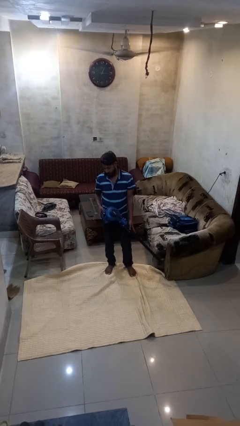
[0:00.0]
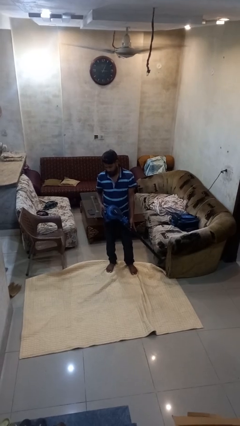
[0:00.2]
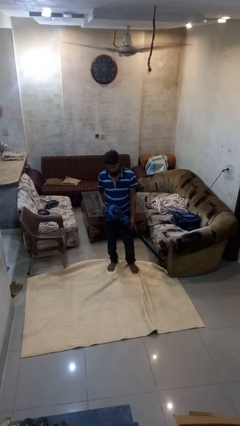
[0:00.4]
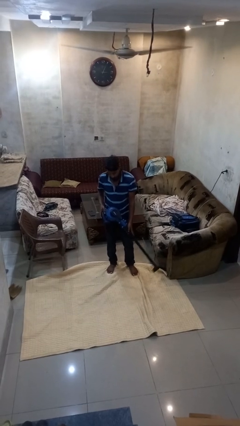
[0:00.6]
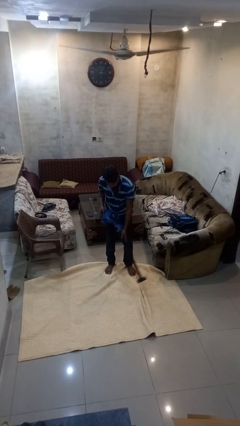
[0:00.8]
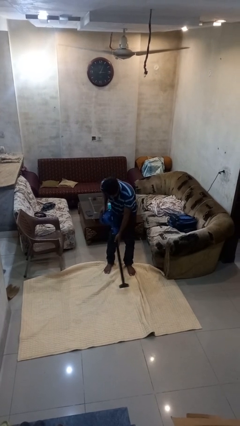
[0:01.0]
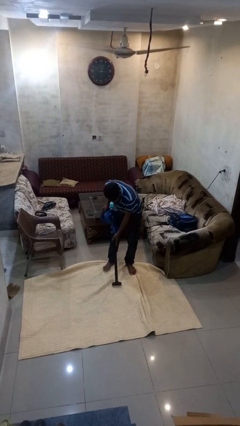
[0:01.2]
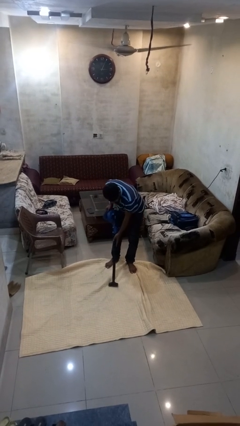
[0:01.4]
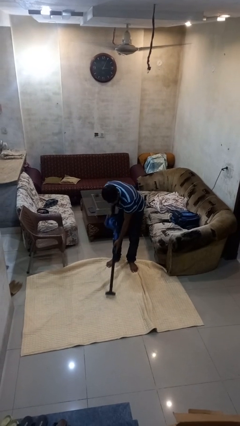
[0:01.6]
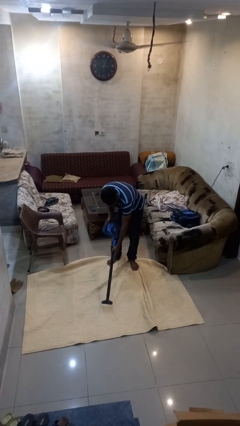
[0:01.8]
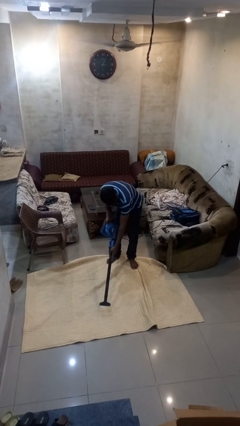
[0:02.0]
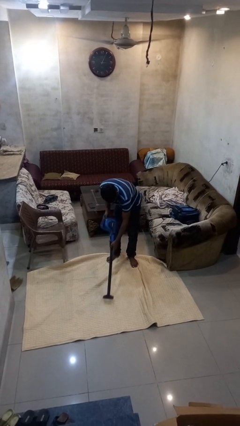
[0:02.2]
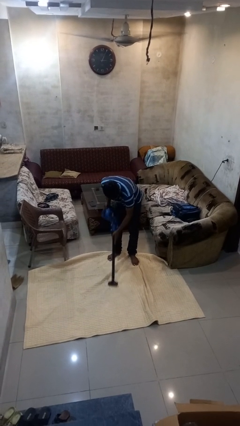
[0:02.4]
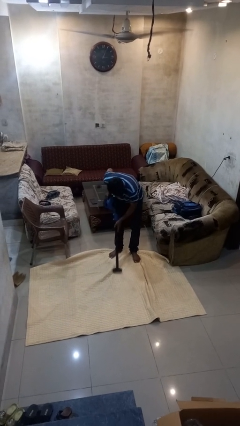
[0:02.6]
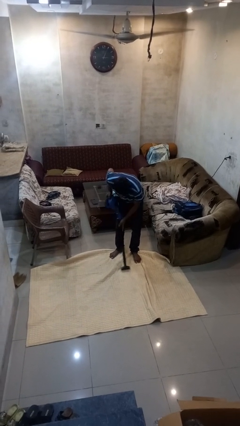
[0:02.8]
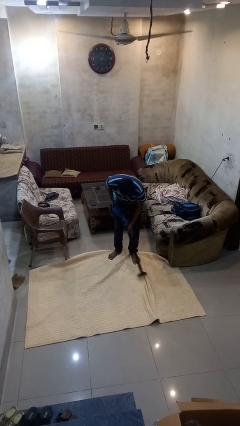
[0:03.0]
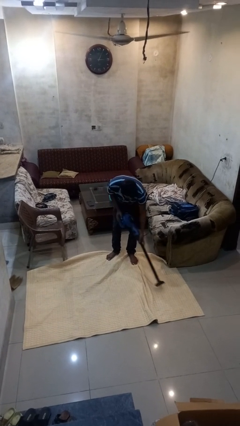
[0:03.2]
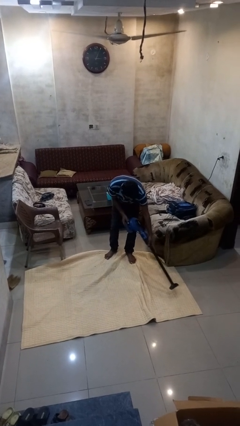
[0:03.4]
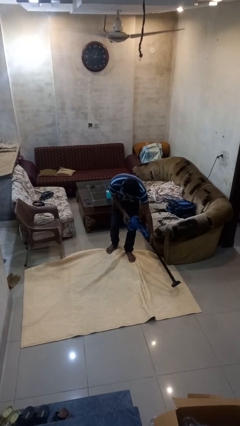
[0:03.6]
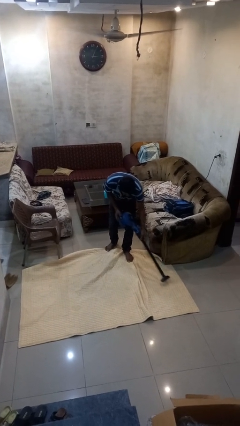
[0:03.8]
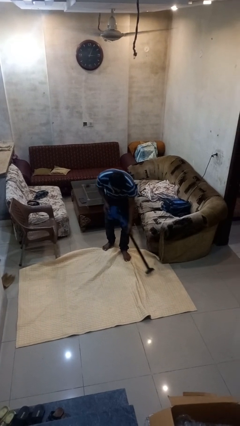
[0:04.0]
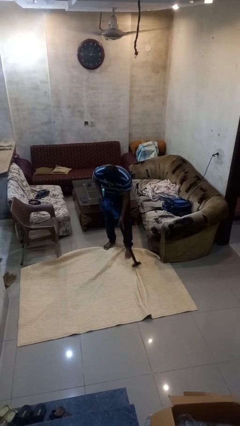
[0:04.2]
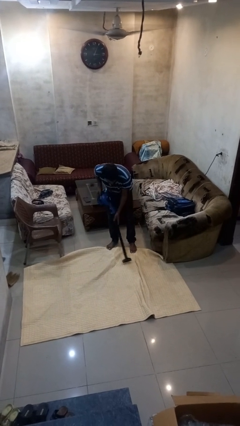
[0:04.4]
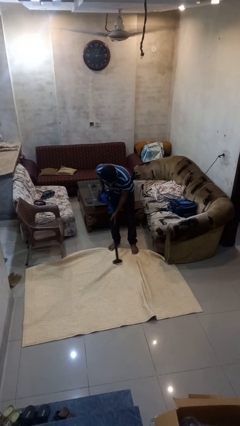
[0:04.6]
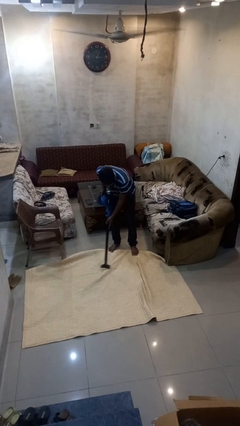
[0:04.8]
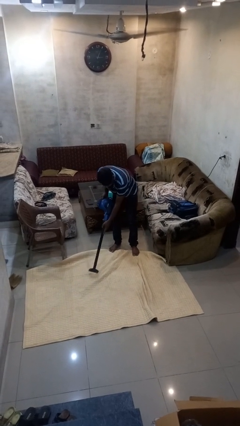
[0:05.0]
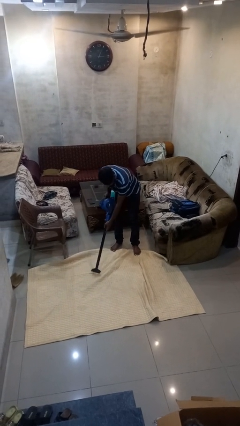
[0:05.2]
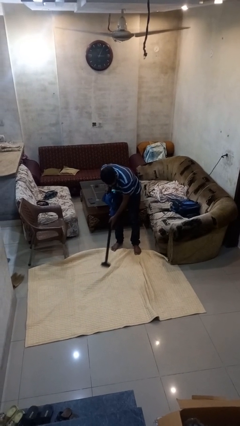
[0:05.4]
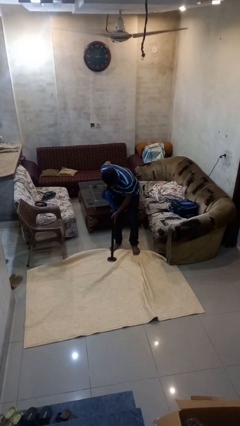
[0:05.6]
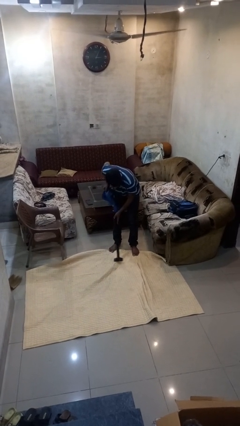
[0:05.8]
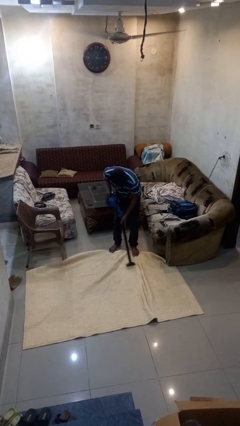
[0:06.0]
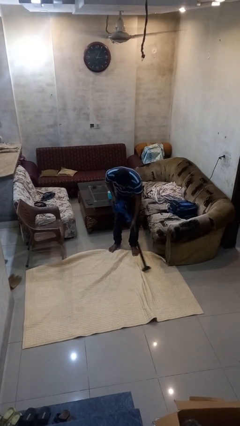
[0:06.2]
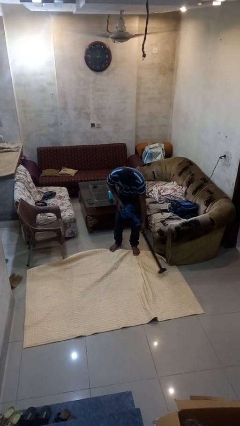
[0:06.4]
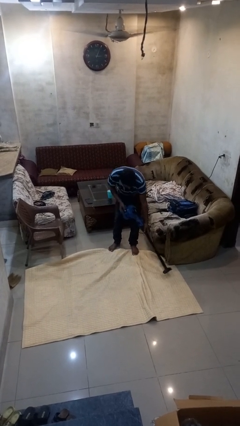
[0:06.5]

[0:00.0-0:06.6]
person vacuums carpet

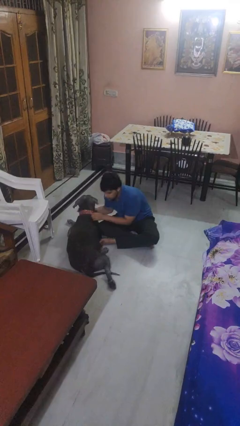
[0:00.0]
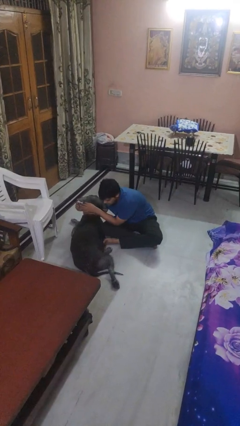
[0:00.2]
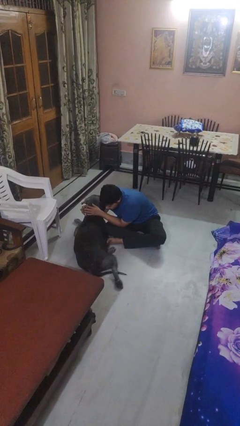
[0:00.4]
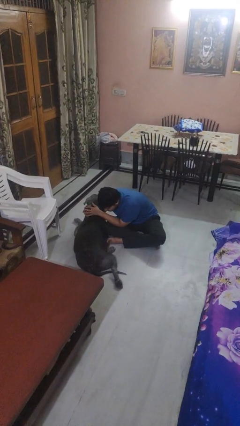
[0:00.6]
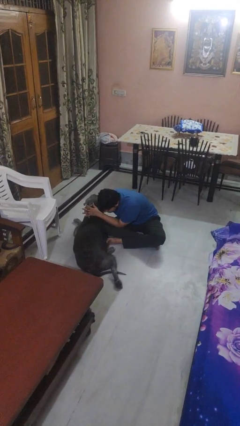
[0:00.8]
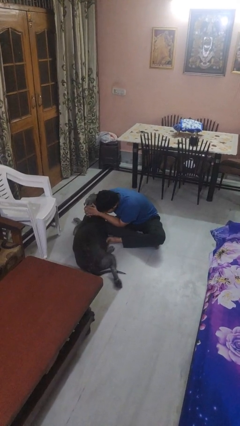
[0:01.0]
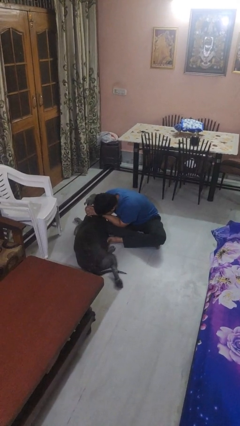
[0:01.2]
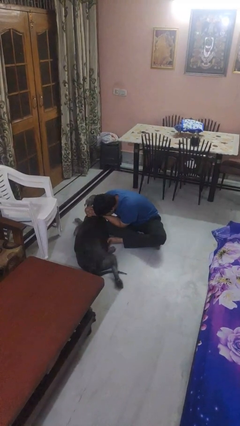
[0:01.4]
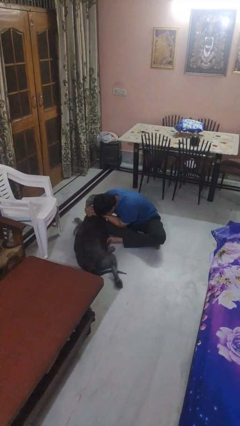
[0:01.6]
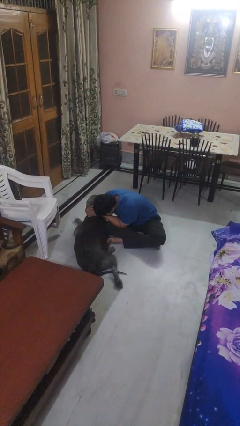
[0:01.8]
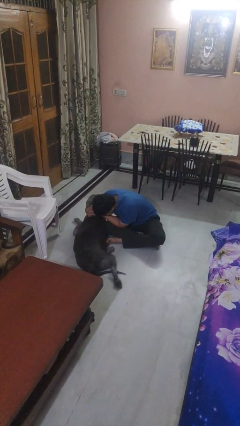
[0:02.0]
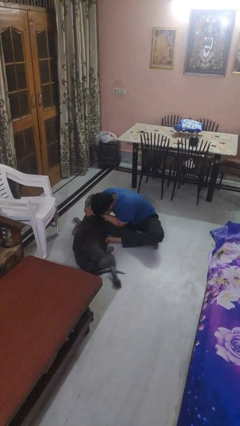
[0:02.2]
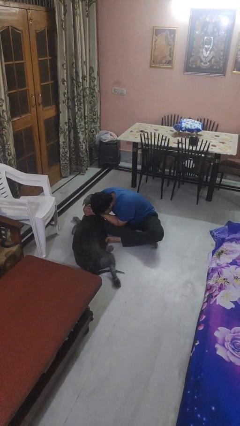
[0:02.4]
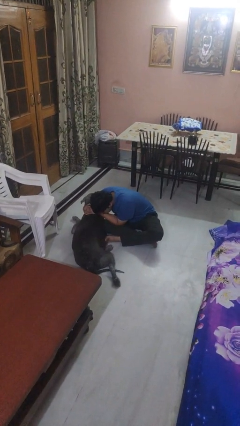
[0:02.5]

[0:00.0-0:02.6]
person hugs dog

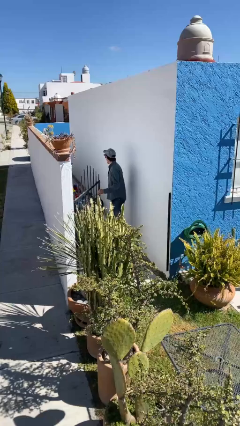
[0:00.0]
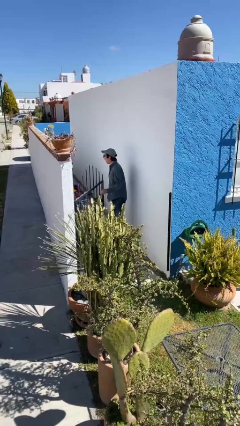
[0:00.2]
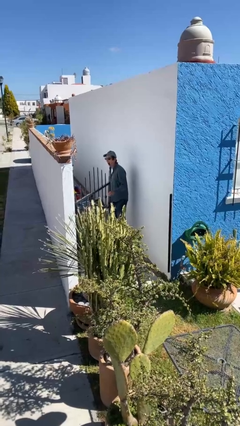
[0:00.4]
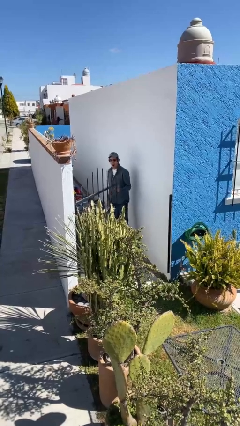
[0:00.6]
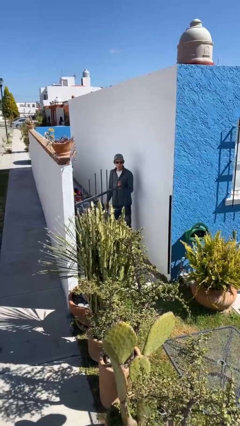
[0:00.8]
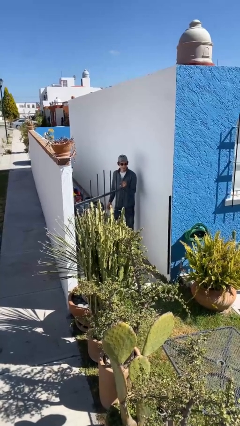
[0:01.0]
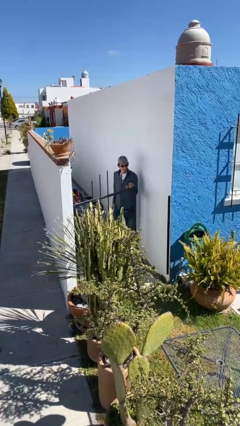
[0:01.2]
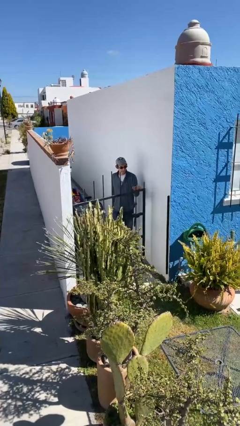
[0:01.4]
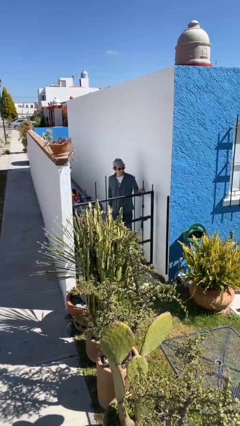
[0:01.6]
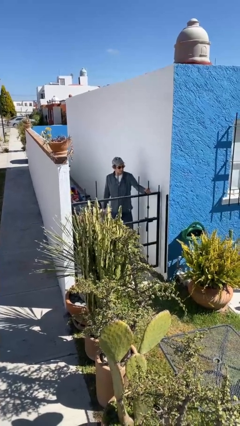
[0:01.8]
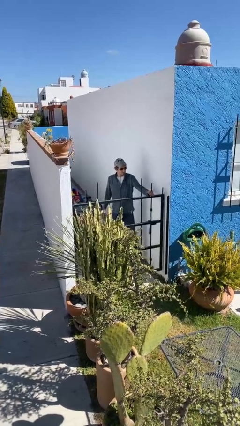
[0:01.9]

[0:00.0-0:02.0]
person closes facility door

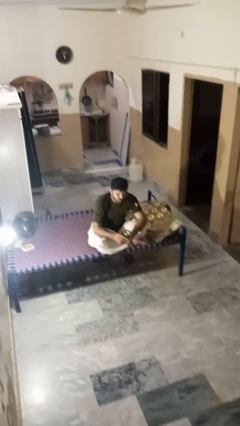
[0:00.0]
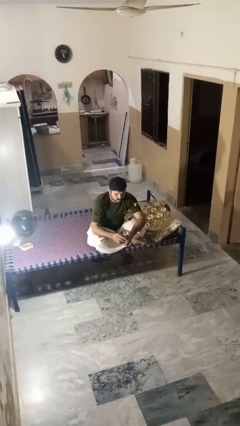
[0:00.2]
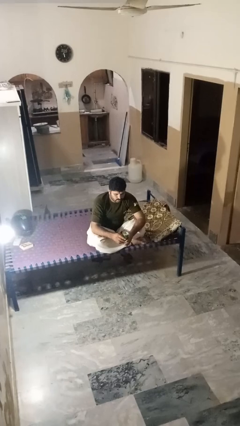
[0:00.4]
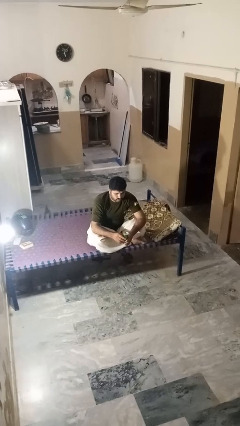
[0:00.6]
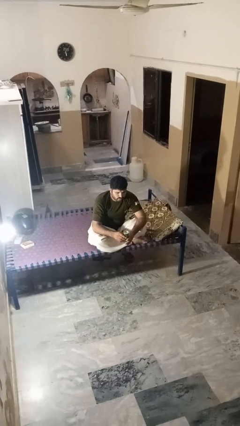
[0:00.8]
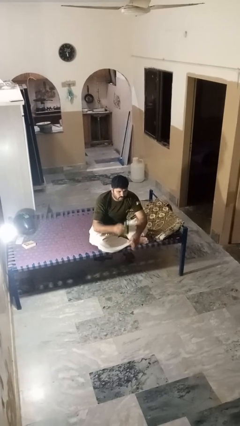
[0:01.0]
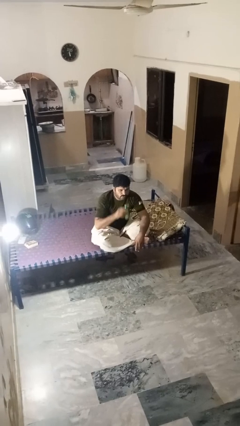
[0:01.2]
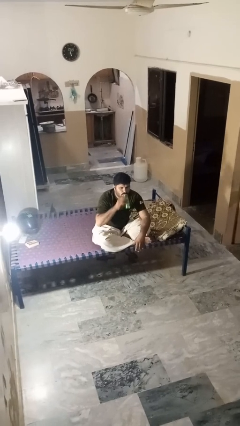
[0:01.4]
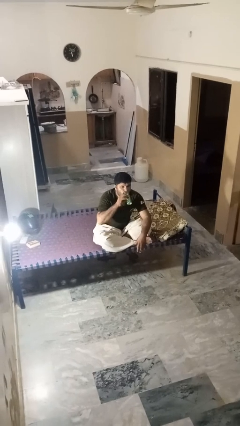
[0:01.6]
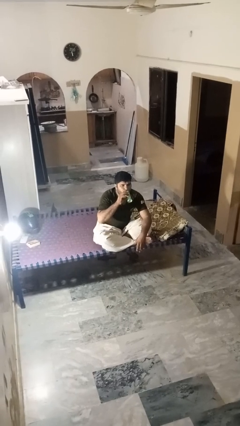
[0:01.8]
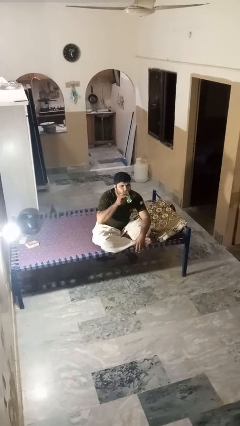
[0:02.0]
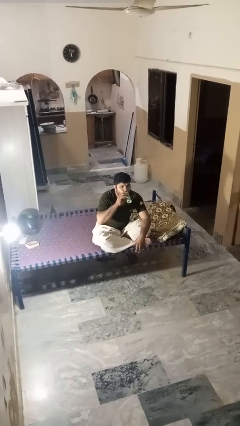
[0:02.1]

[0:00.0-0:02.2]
person drinks from beverage can

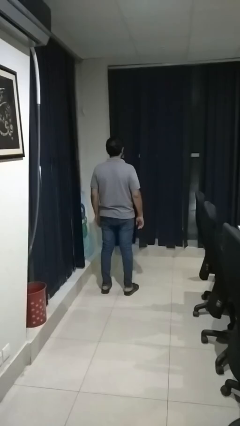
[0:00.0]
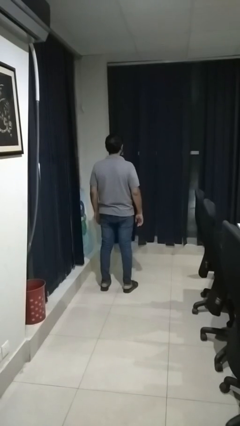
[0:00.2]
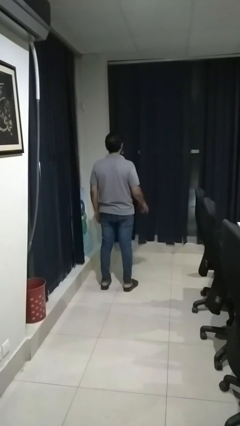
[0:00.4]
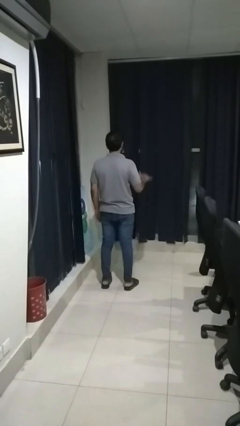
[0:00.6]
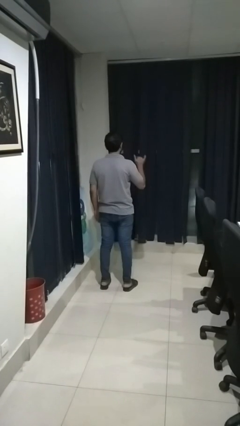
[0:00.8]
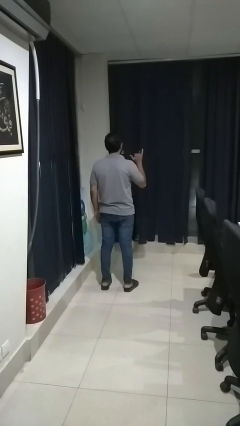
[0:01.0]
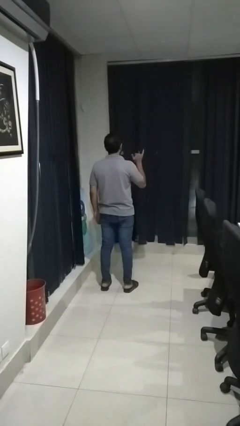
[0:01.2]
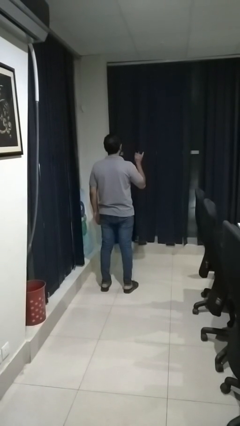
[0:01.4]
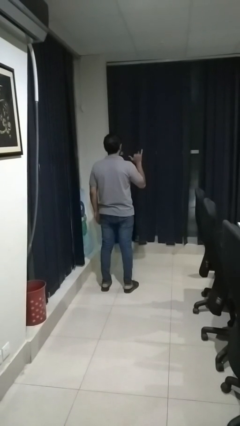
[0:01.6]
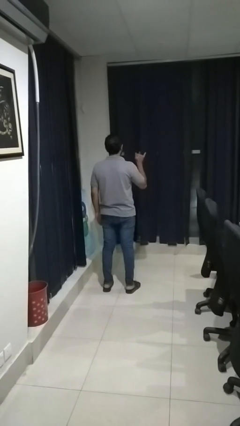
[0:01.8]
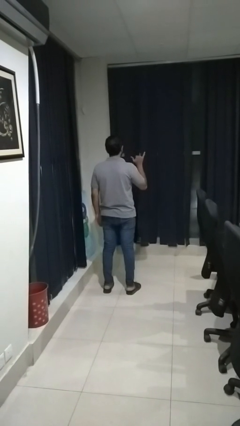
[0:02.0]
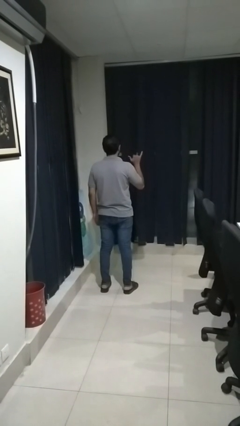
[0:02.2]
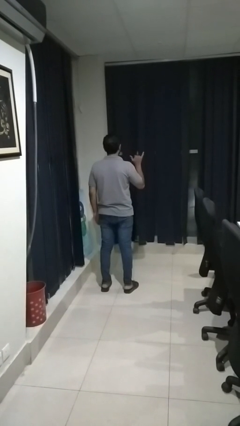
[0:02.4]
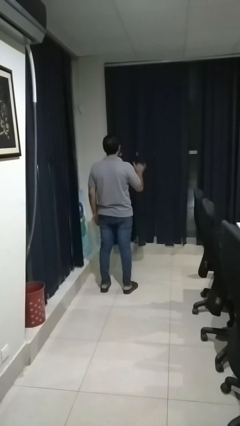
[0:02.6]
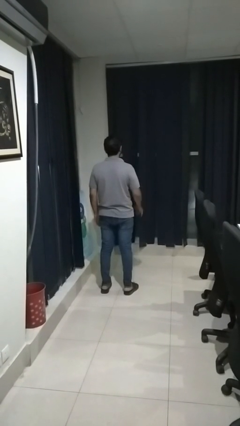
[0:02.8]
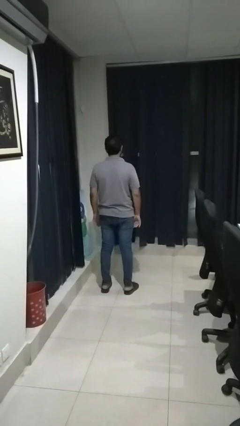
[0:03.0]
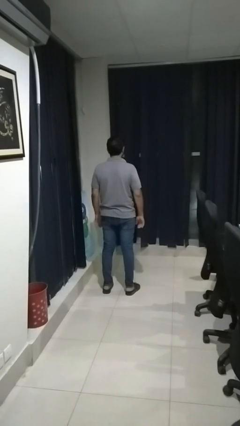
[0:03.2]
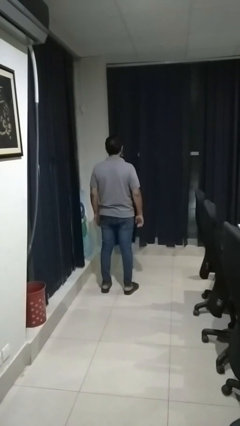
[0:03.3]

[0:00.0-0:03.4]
person gestures hang loose

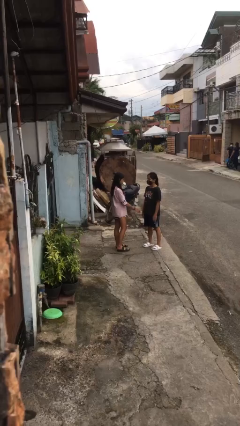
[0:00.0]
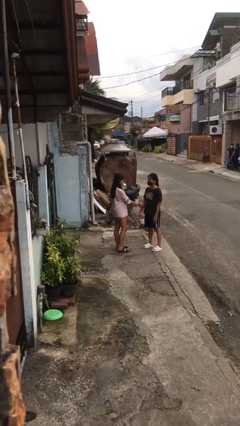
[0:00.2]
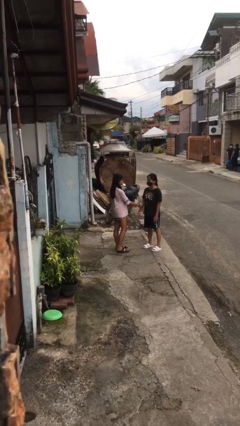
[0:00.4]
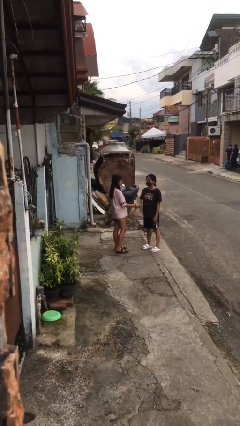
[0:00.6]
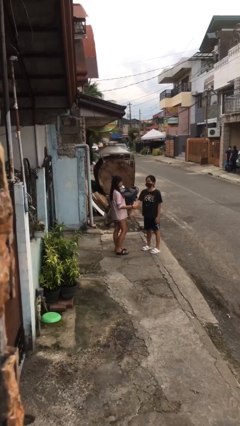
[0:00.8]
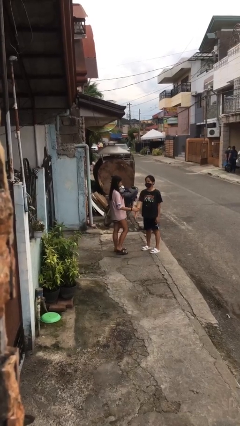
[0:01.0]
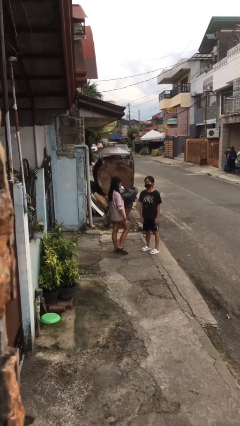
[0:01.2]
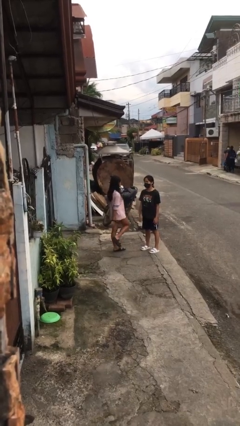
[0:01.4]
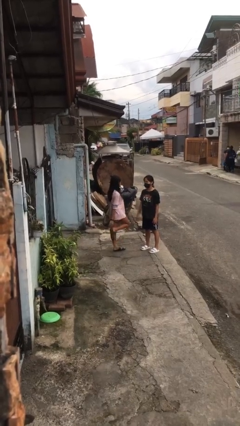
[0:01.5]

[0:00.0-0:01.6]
person grabs person by forearm
